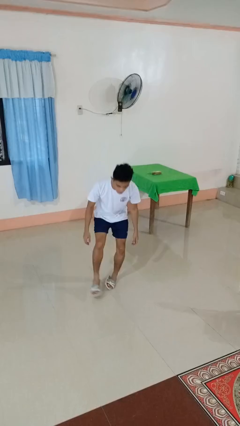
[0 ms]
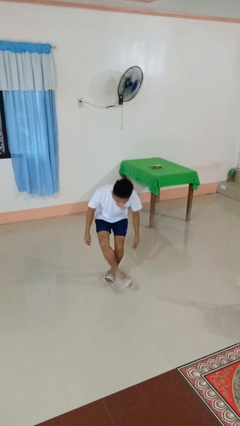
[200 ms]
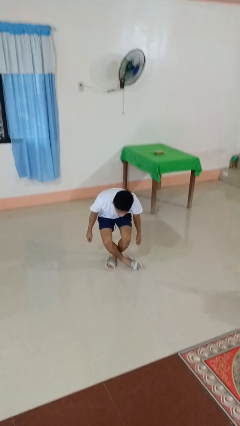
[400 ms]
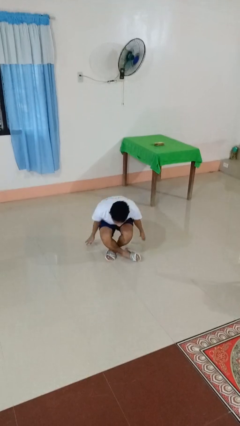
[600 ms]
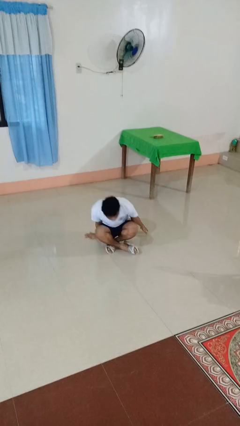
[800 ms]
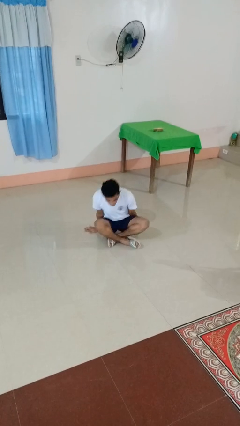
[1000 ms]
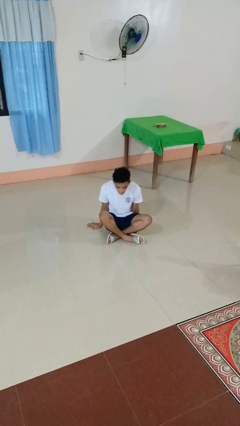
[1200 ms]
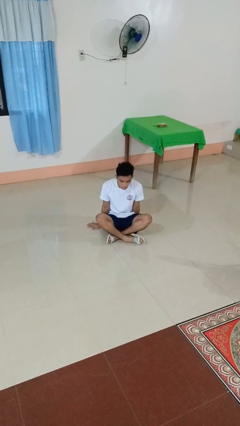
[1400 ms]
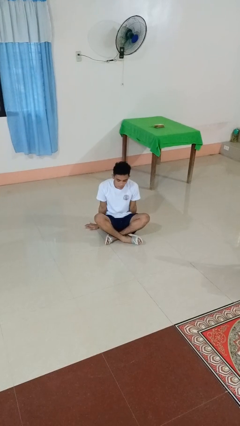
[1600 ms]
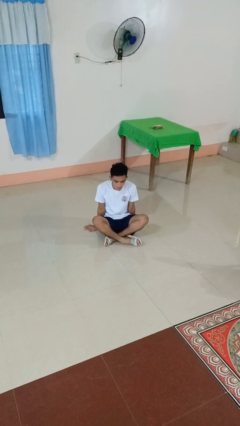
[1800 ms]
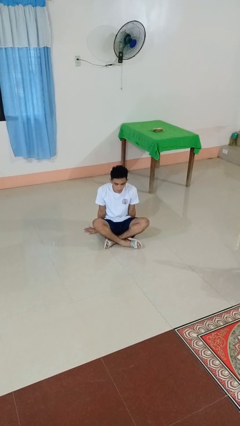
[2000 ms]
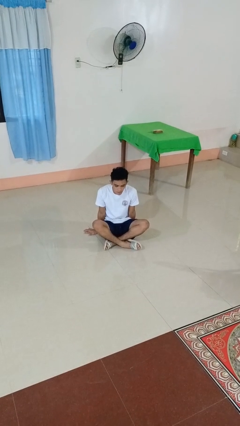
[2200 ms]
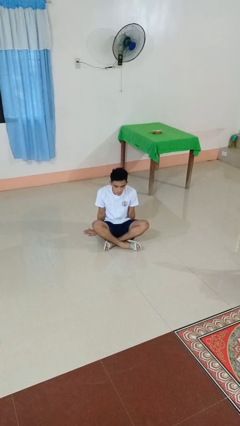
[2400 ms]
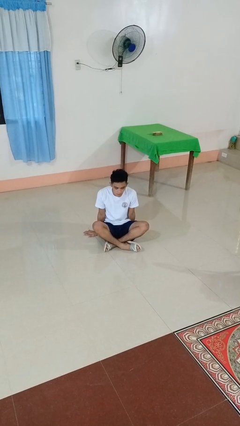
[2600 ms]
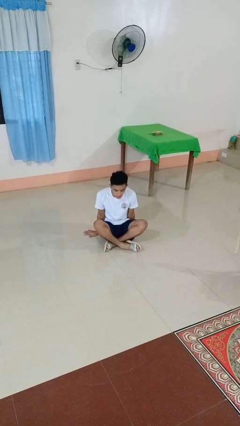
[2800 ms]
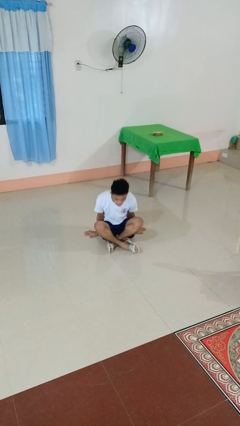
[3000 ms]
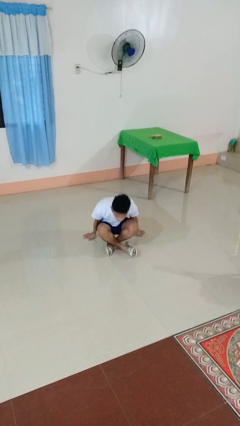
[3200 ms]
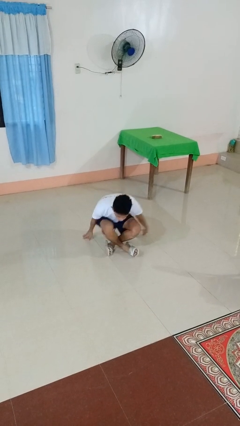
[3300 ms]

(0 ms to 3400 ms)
person sits crisscross

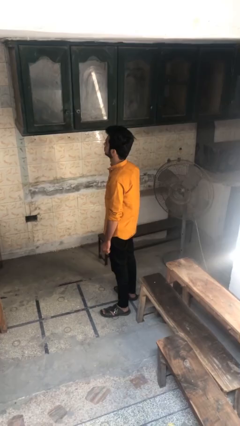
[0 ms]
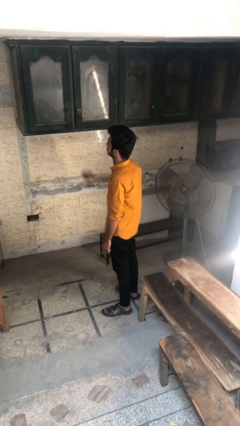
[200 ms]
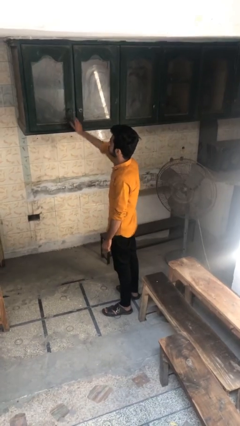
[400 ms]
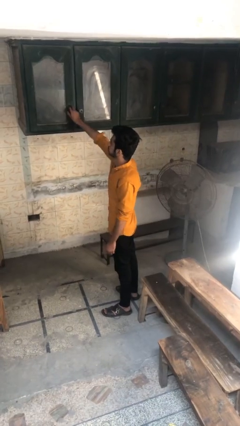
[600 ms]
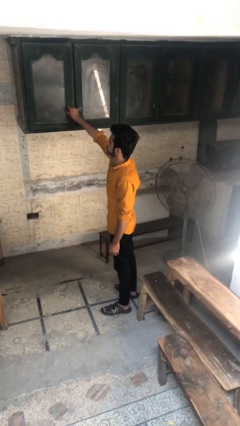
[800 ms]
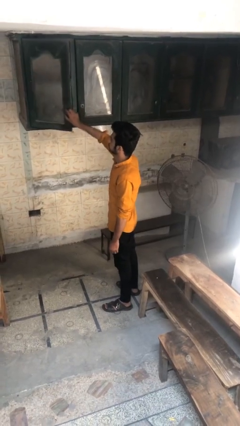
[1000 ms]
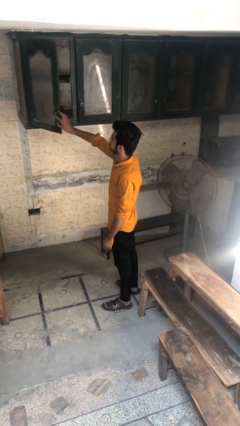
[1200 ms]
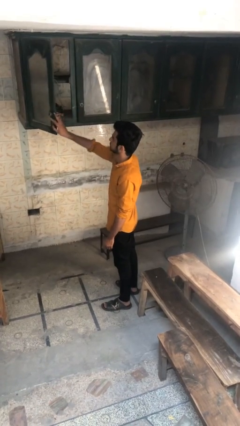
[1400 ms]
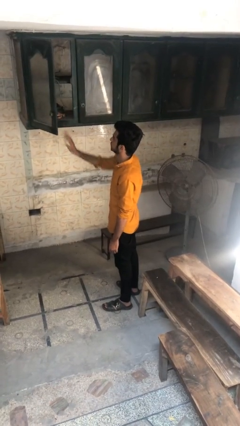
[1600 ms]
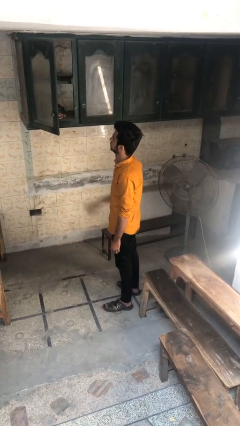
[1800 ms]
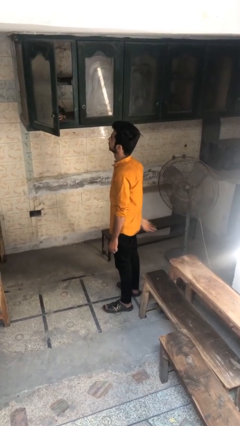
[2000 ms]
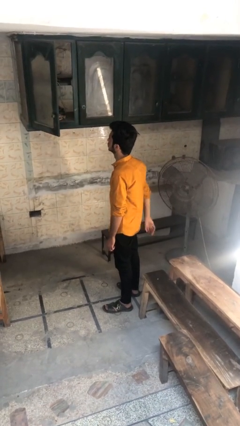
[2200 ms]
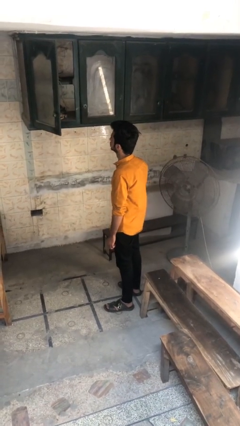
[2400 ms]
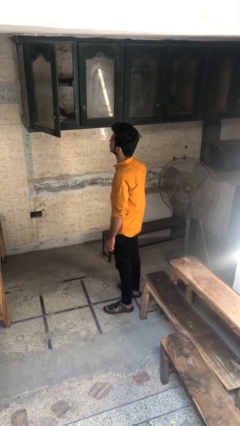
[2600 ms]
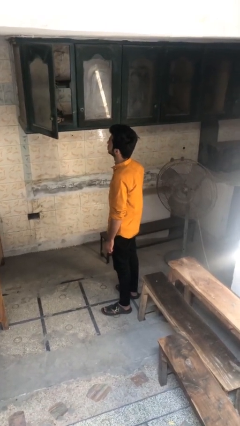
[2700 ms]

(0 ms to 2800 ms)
person opens cabinet

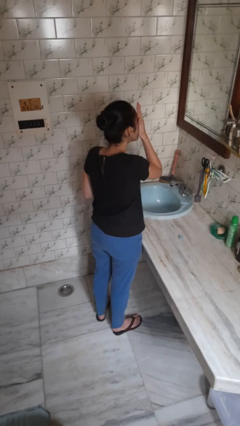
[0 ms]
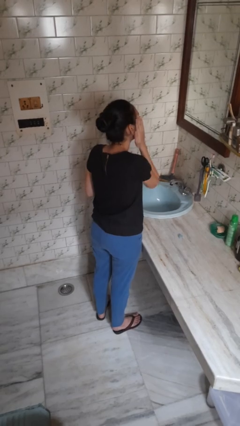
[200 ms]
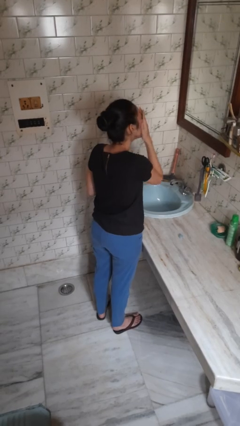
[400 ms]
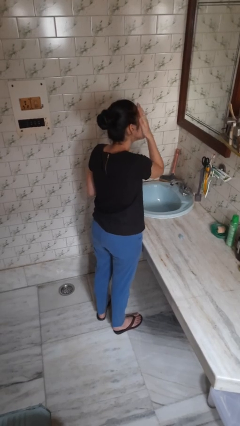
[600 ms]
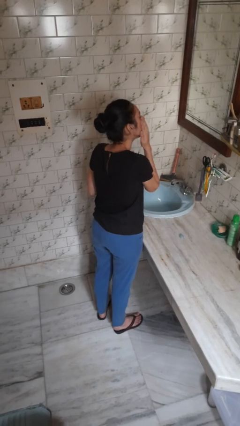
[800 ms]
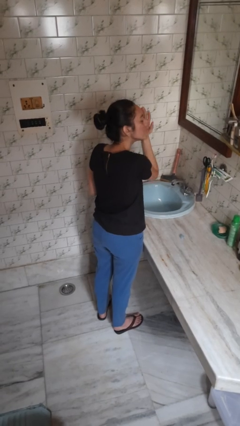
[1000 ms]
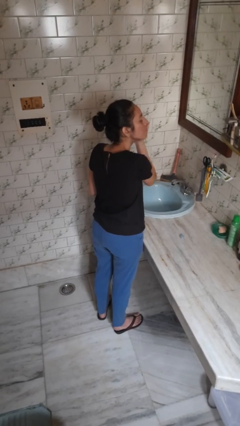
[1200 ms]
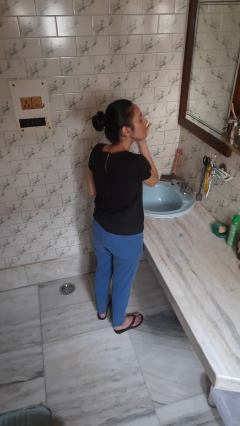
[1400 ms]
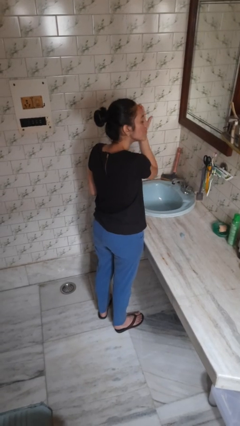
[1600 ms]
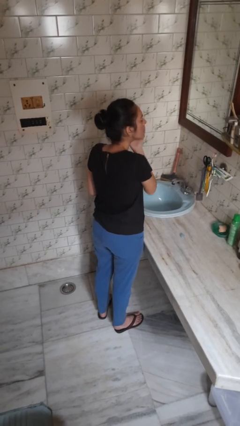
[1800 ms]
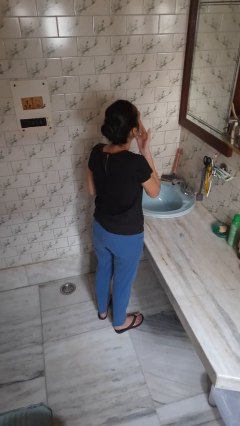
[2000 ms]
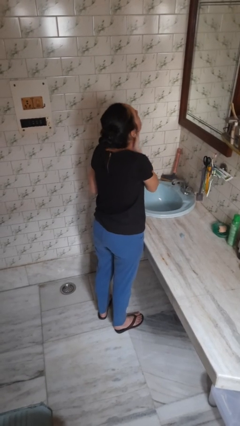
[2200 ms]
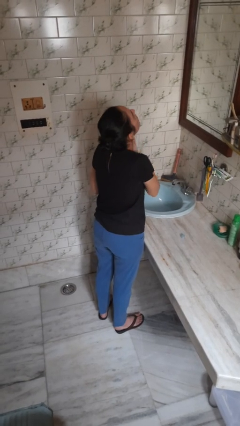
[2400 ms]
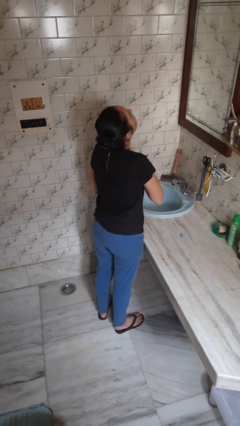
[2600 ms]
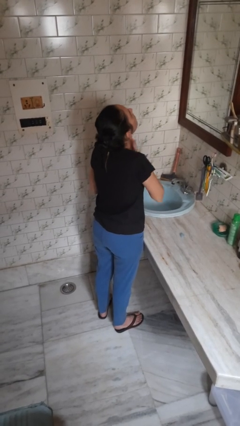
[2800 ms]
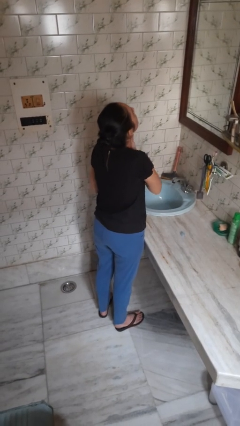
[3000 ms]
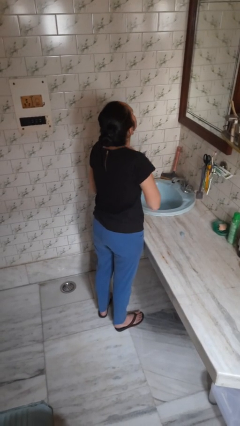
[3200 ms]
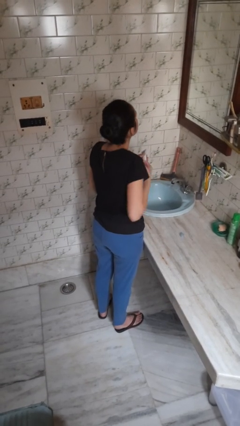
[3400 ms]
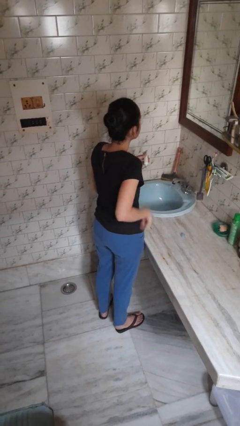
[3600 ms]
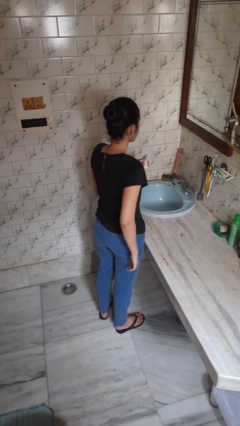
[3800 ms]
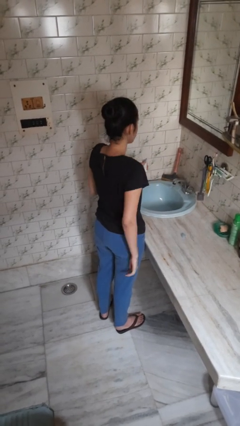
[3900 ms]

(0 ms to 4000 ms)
person applies sunscreen

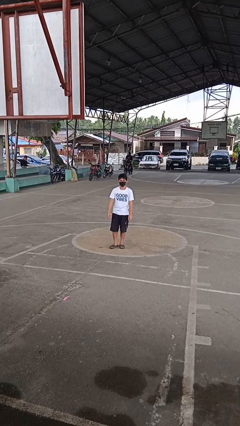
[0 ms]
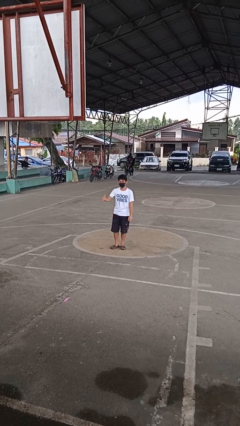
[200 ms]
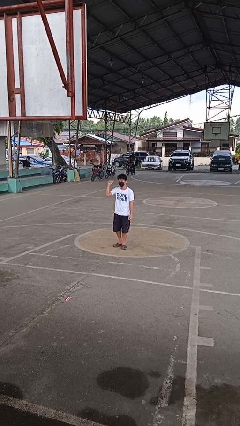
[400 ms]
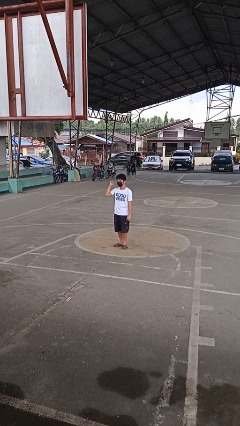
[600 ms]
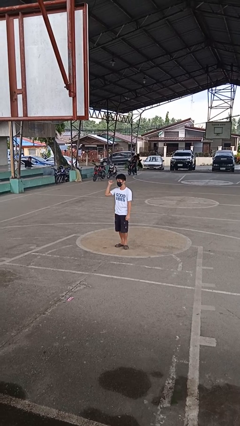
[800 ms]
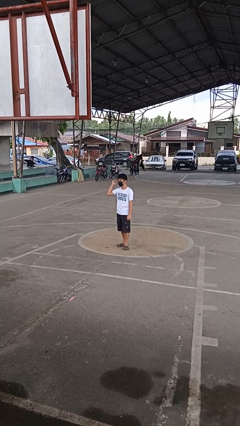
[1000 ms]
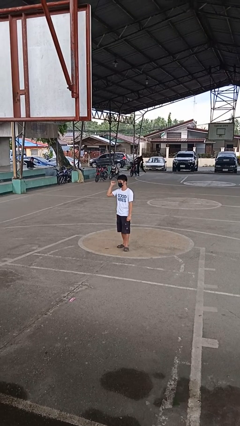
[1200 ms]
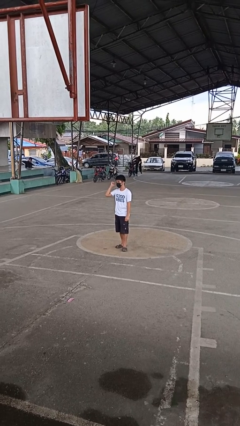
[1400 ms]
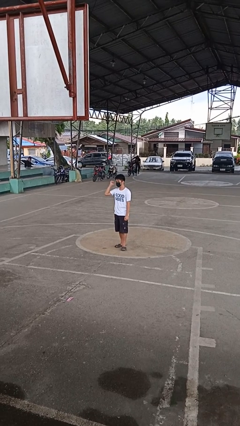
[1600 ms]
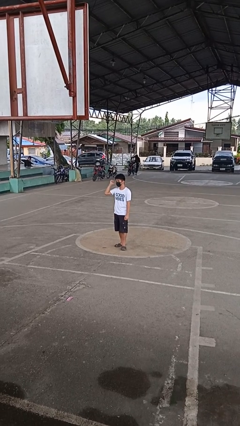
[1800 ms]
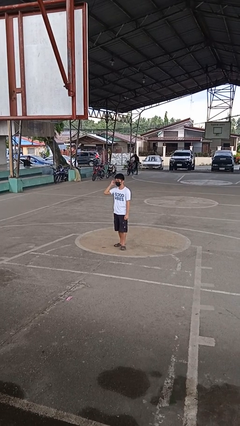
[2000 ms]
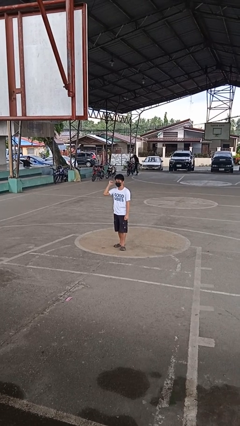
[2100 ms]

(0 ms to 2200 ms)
person gestures behind me

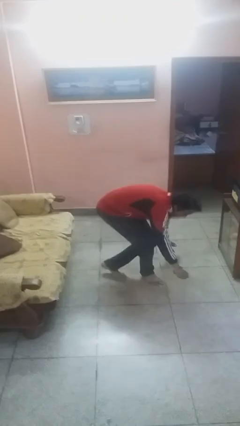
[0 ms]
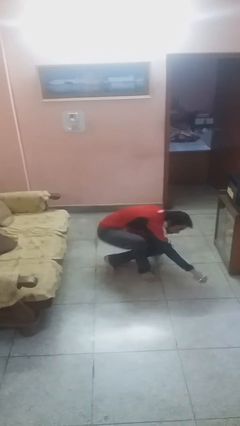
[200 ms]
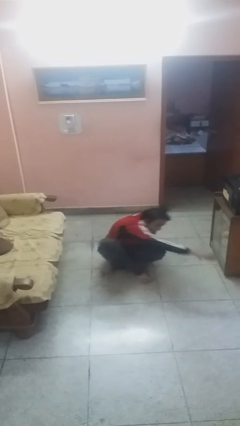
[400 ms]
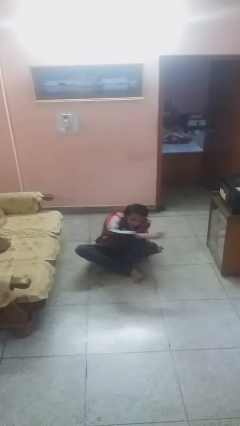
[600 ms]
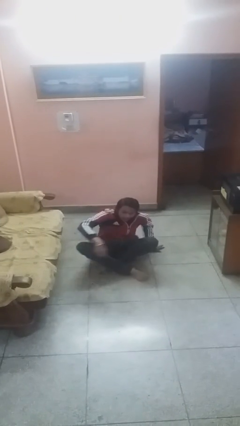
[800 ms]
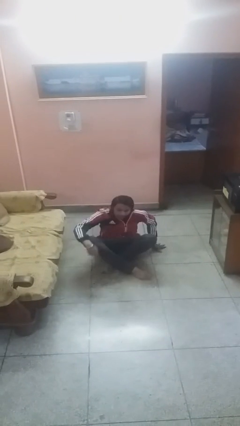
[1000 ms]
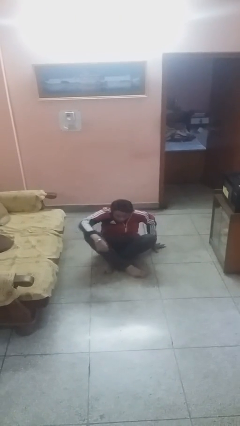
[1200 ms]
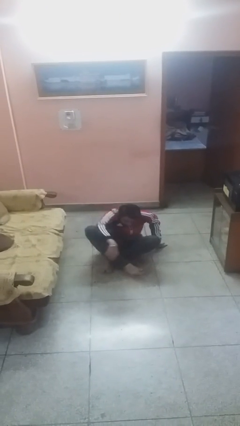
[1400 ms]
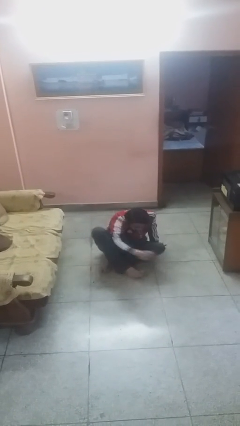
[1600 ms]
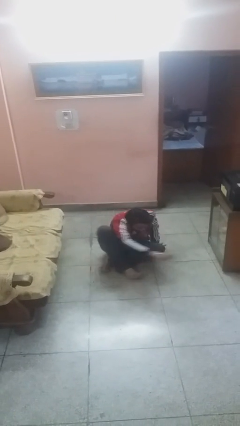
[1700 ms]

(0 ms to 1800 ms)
person sits down

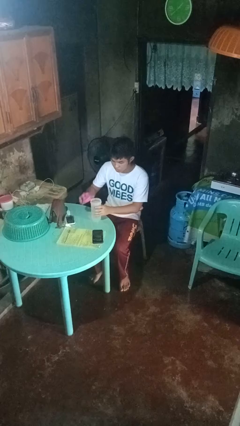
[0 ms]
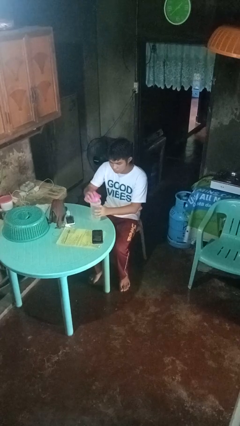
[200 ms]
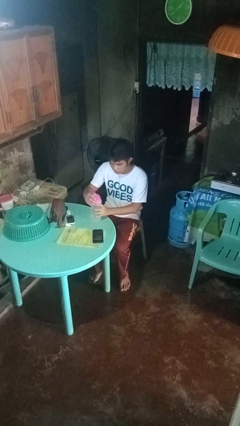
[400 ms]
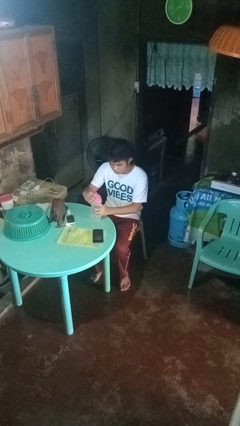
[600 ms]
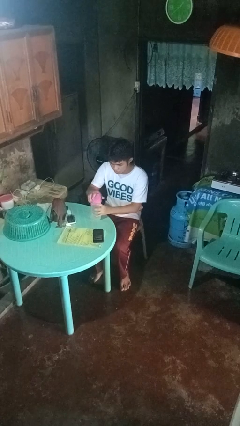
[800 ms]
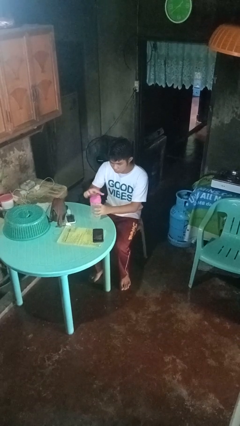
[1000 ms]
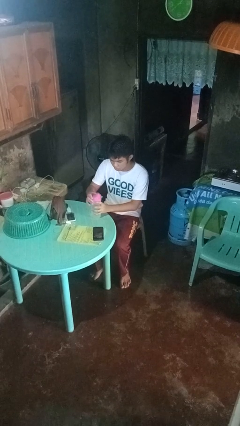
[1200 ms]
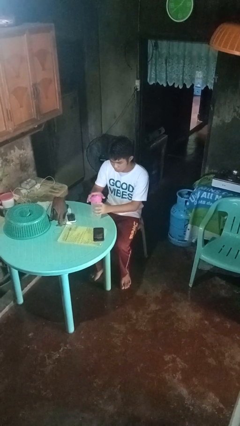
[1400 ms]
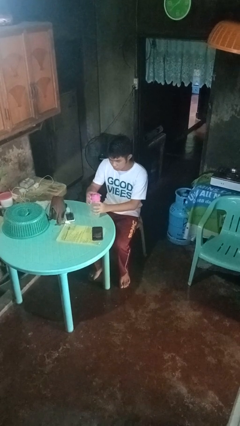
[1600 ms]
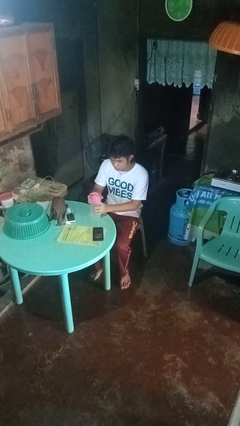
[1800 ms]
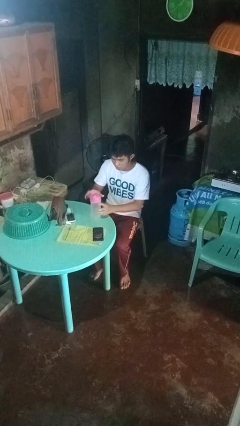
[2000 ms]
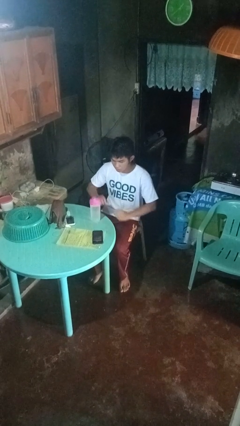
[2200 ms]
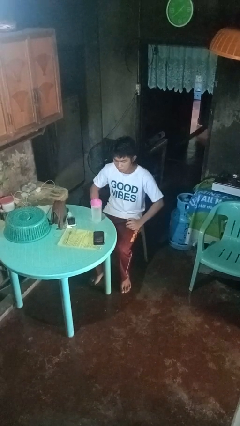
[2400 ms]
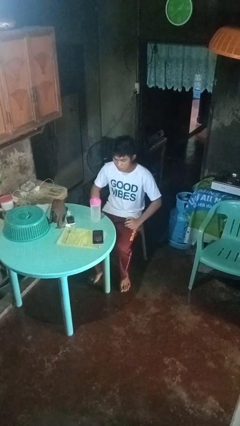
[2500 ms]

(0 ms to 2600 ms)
person screws lid to bottle

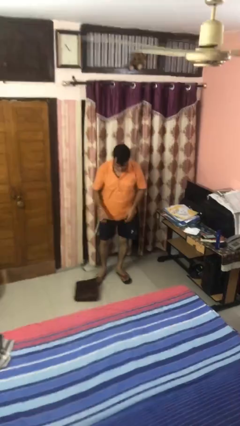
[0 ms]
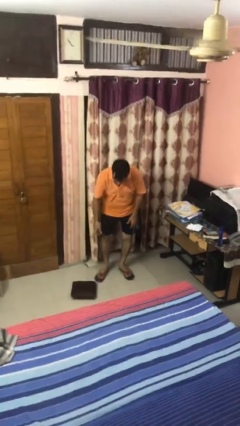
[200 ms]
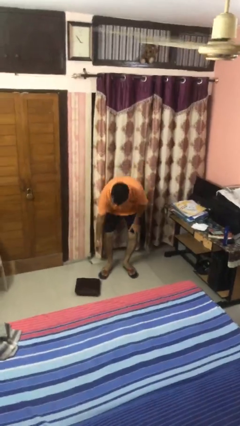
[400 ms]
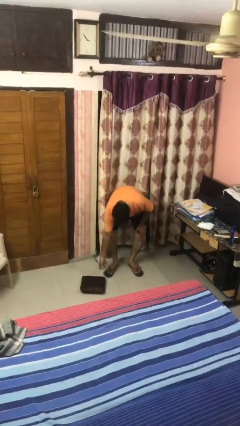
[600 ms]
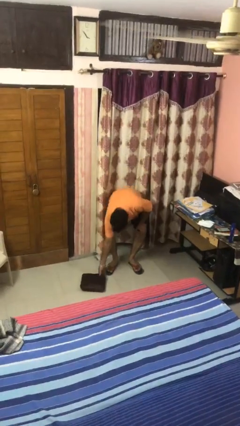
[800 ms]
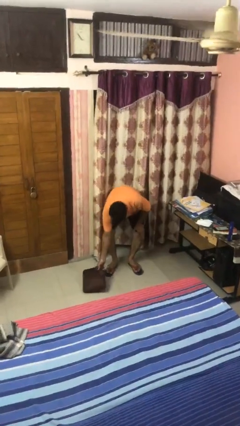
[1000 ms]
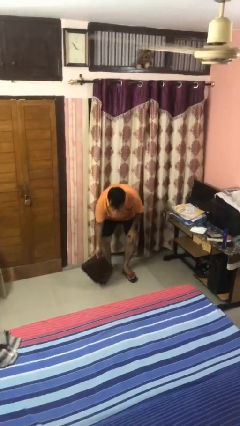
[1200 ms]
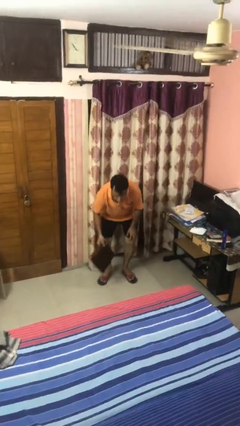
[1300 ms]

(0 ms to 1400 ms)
person picks up object from floor
